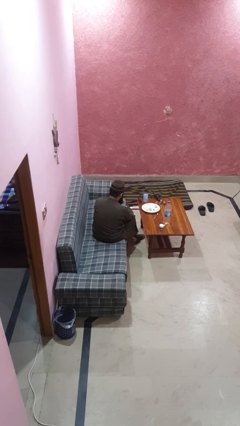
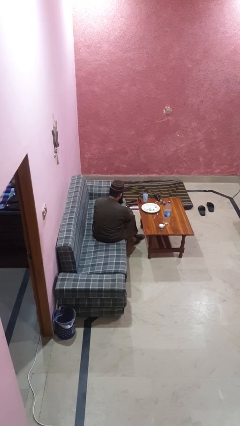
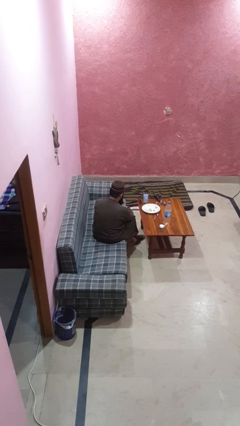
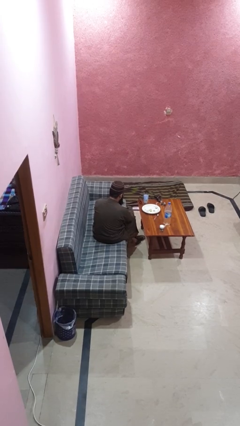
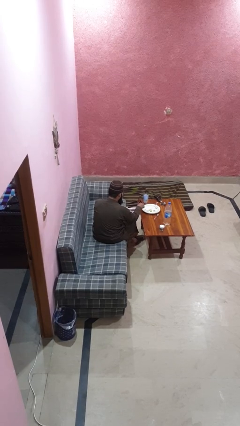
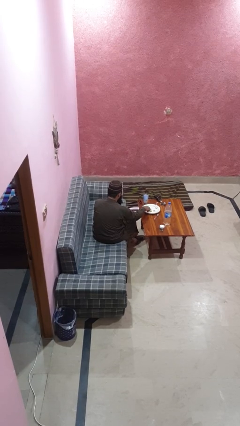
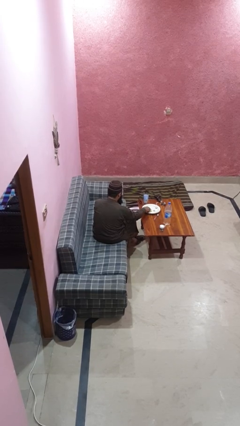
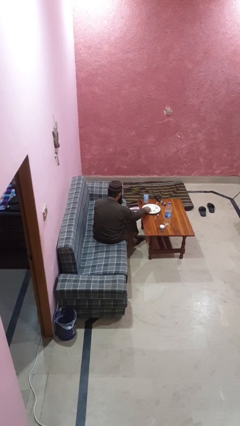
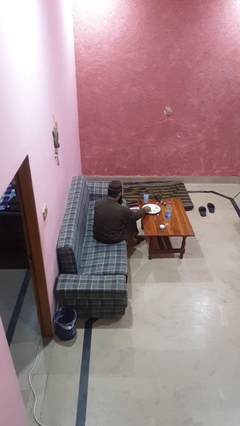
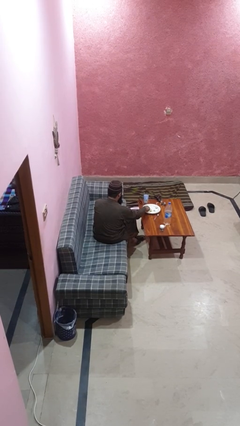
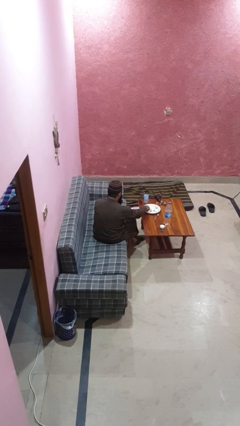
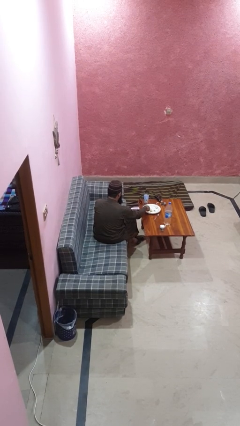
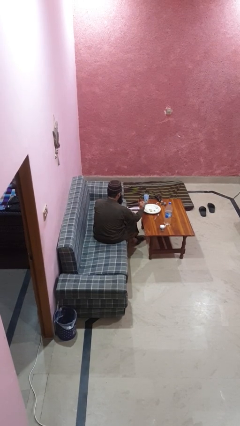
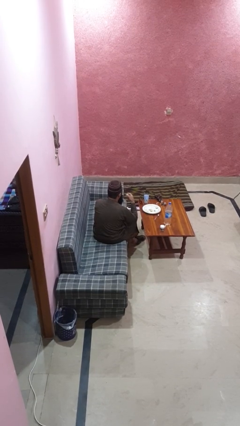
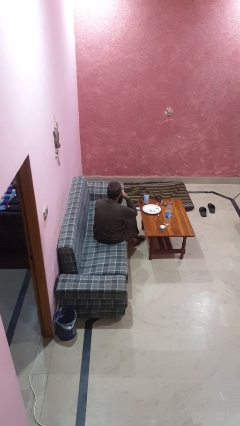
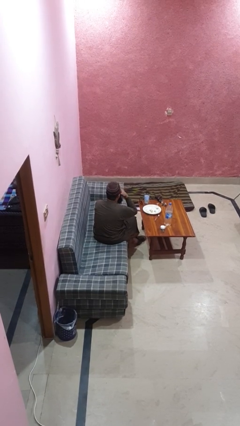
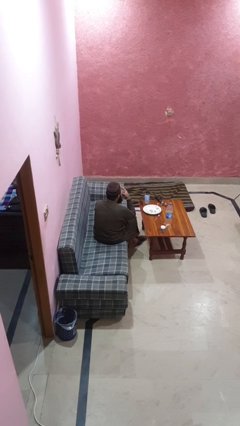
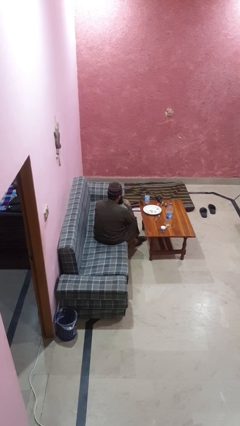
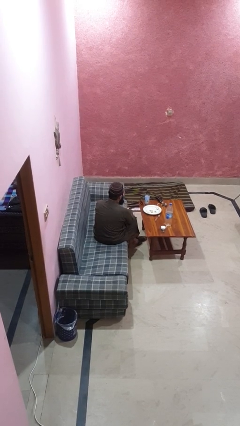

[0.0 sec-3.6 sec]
person eats with hands

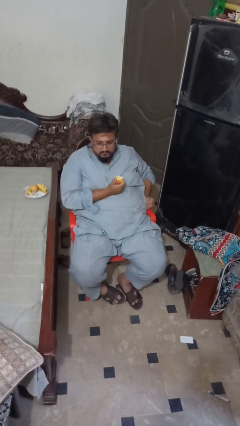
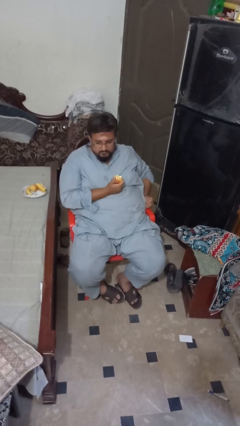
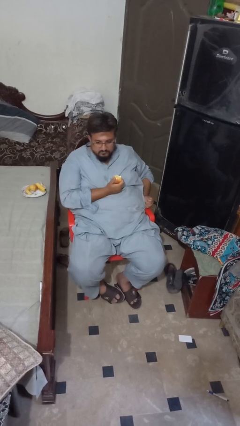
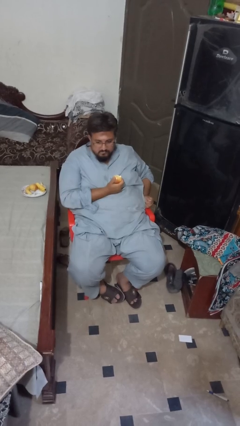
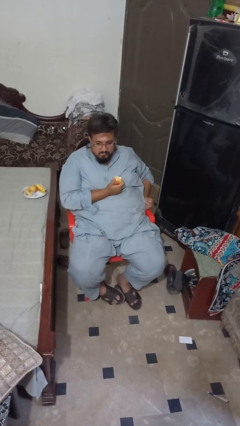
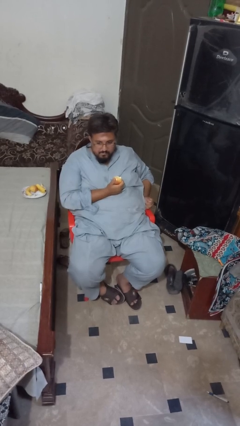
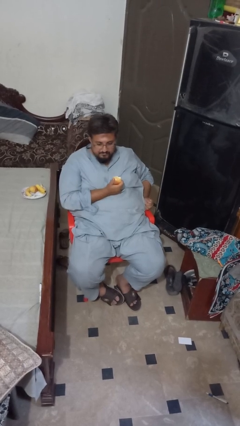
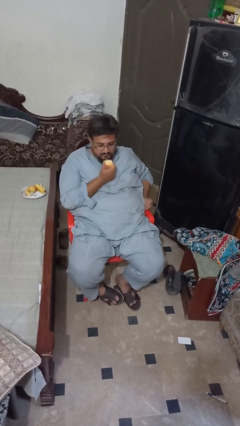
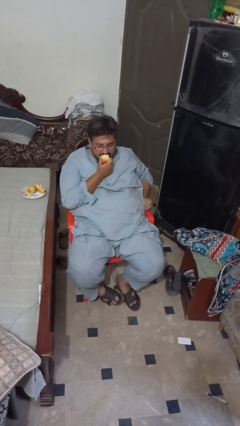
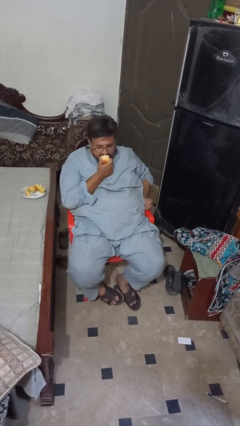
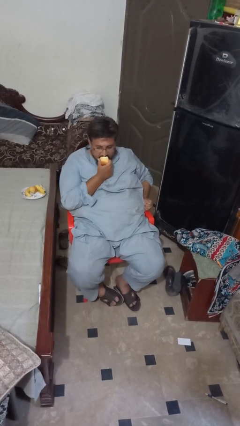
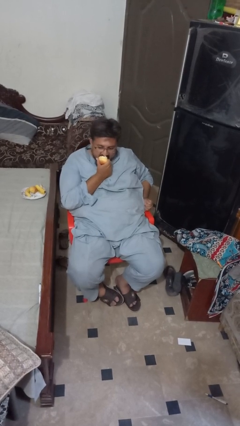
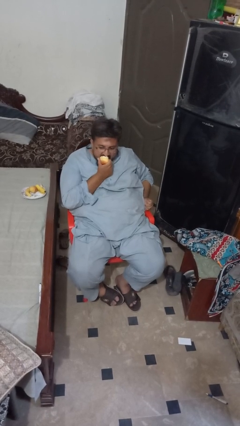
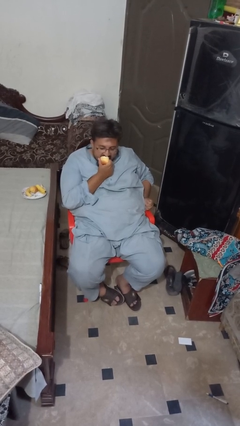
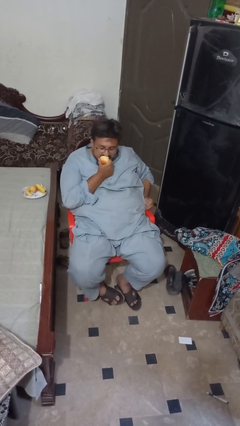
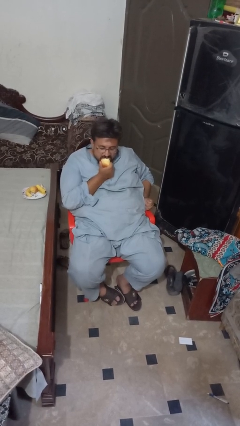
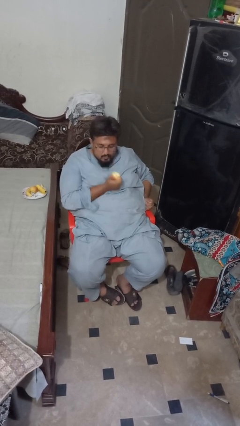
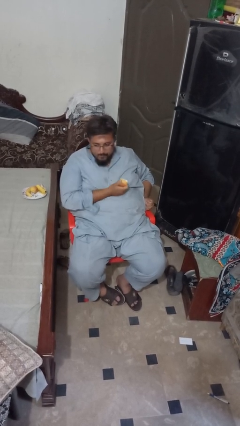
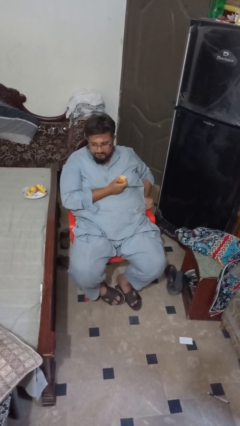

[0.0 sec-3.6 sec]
person eats apple

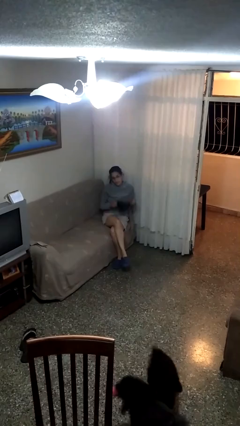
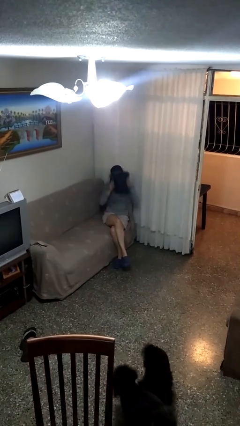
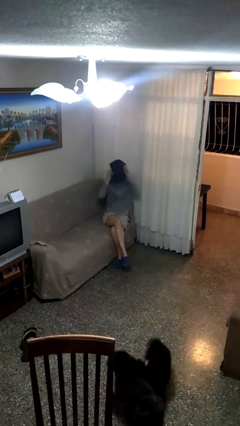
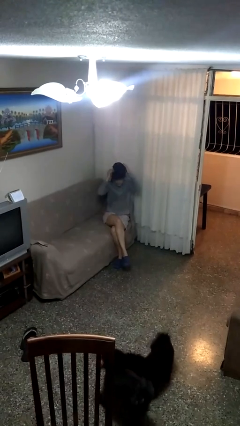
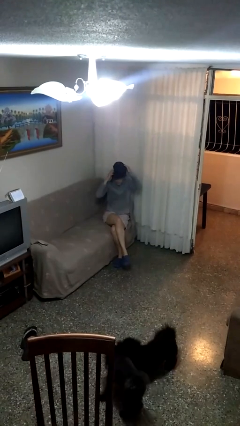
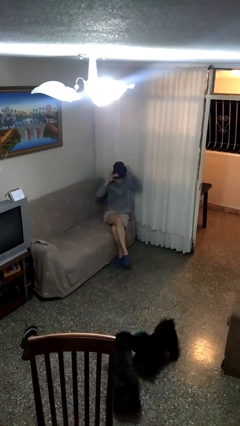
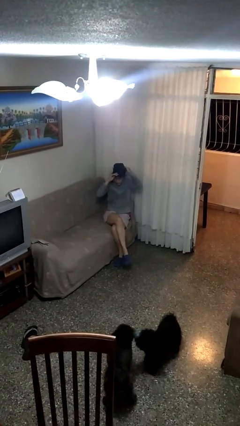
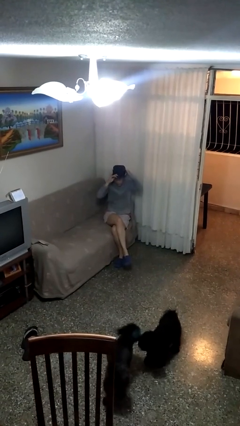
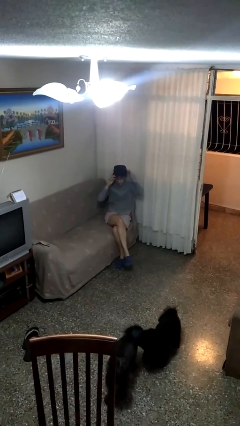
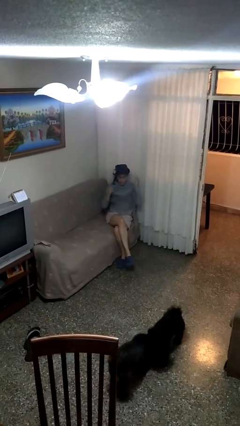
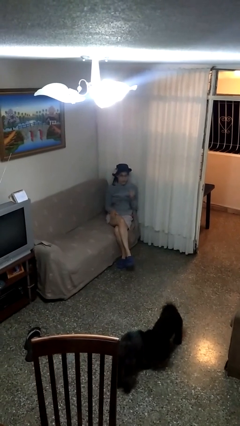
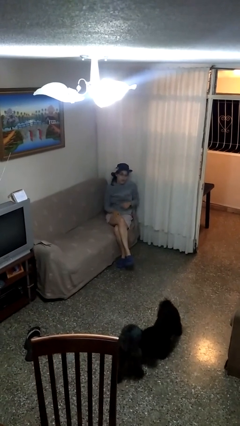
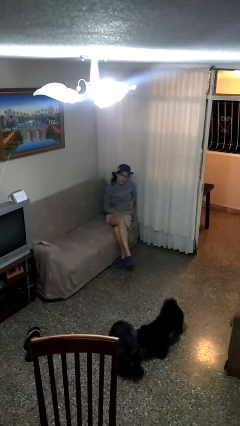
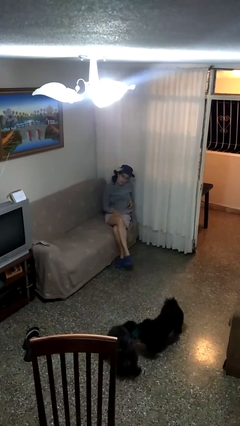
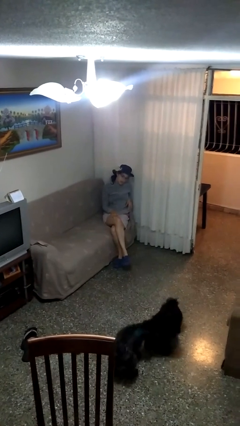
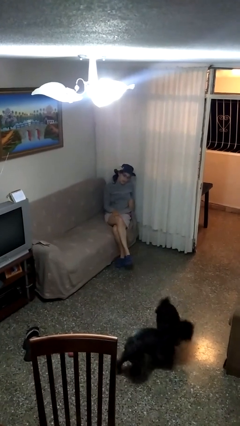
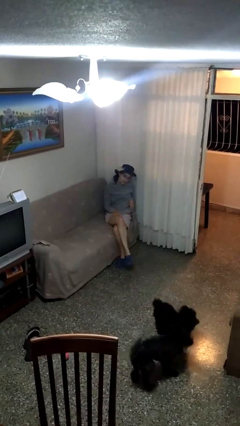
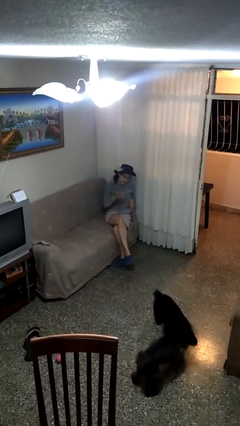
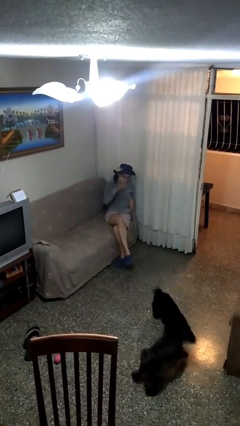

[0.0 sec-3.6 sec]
person puts on hat

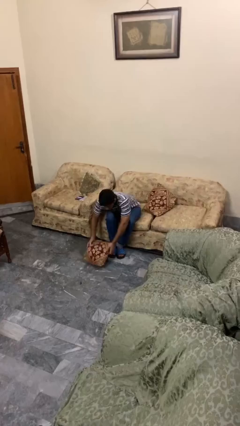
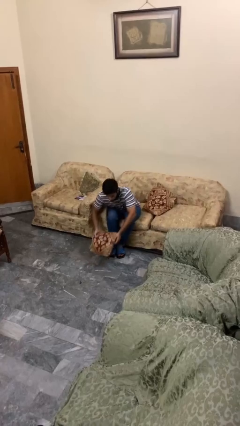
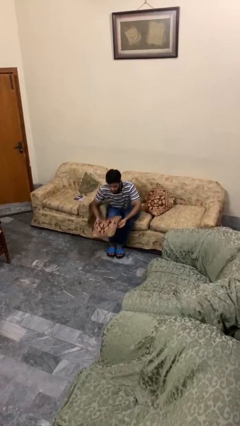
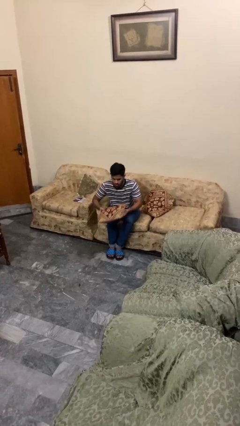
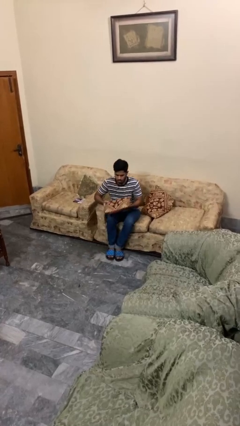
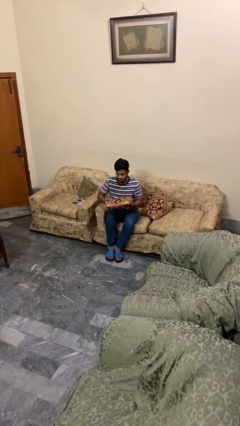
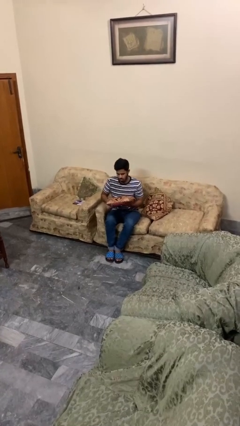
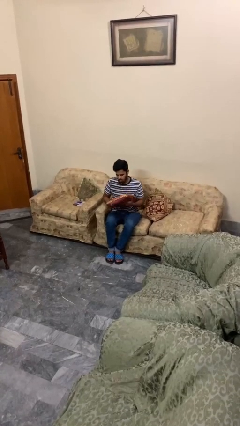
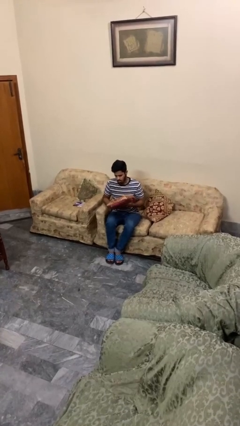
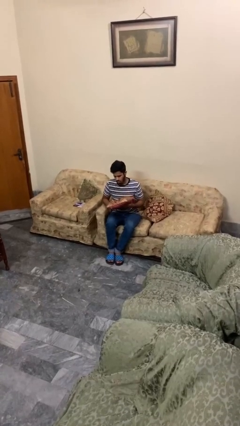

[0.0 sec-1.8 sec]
person picks up object from floor

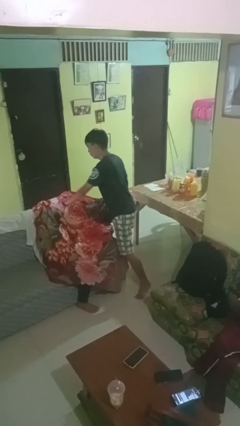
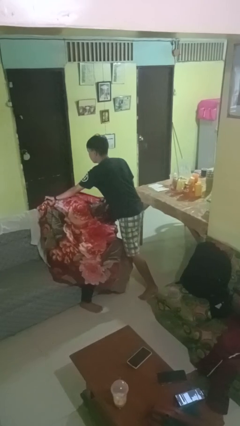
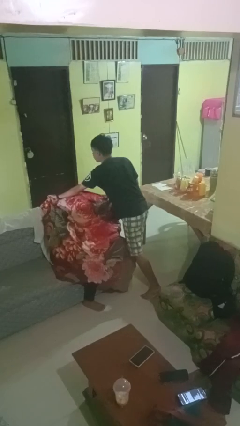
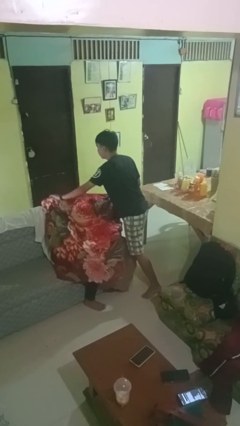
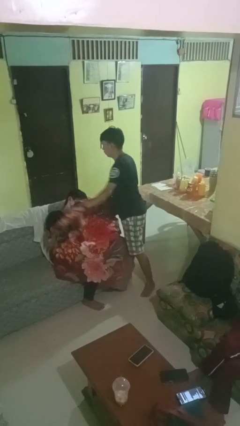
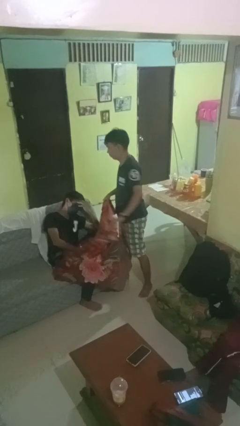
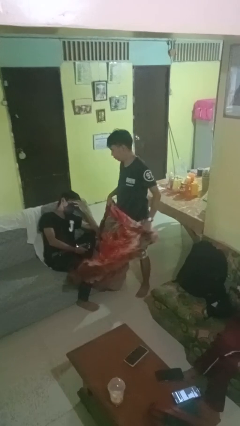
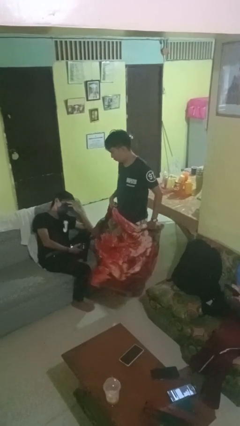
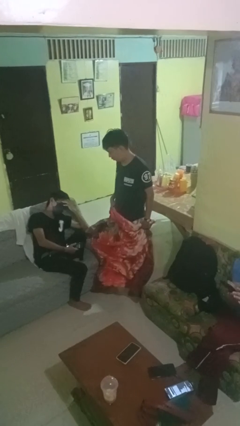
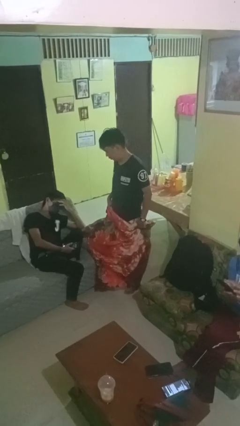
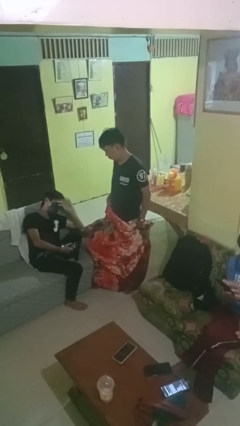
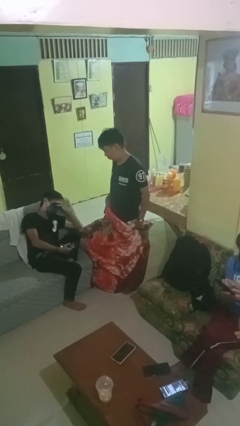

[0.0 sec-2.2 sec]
person uncovers friend with blanket

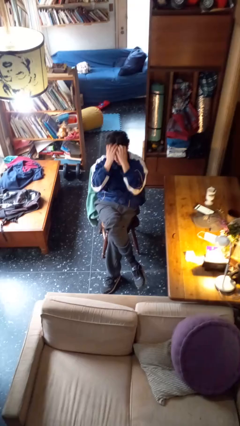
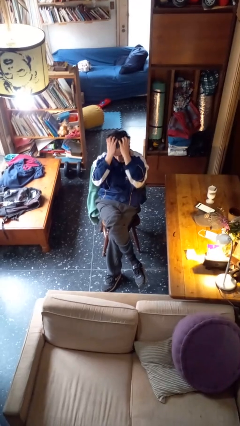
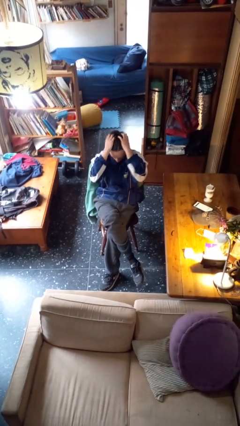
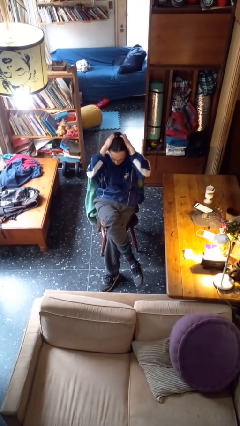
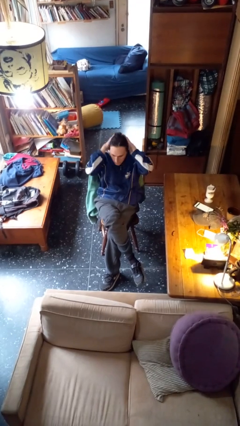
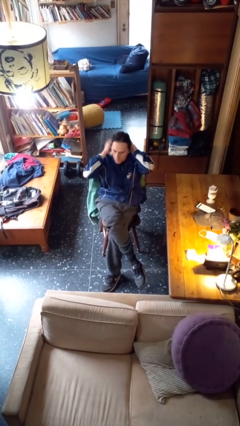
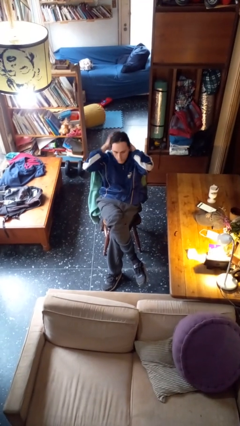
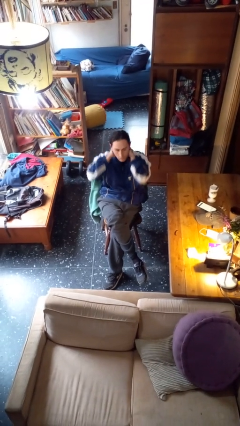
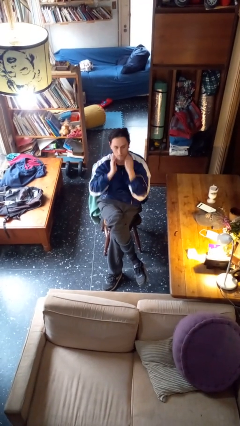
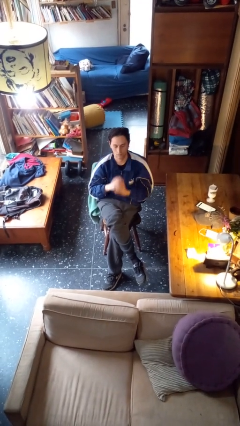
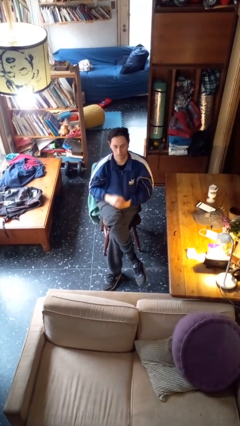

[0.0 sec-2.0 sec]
person strokes hair

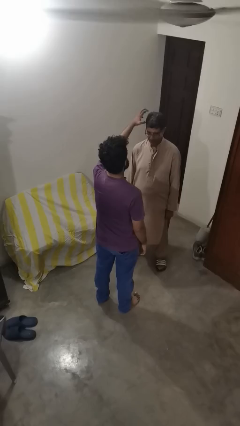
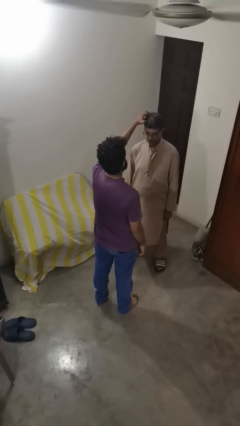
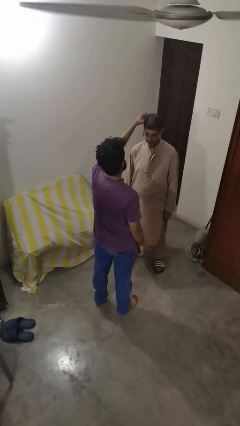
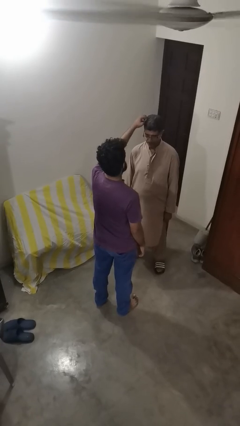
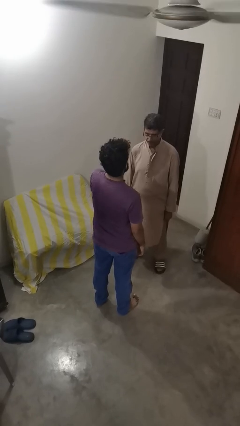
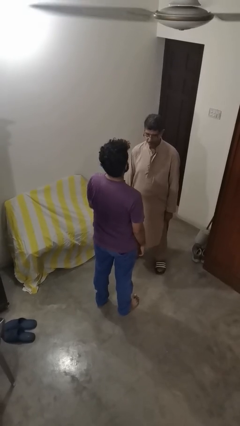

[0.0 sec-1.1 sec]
person grabs person by hair
